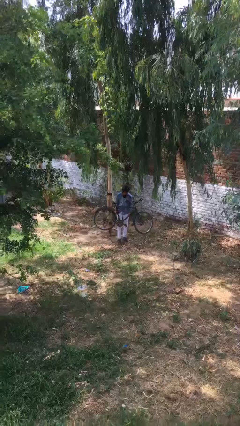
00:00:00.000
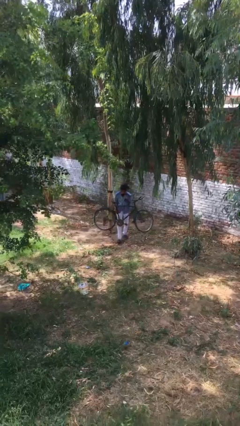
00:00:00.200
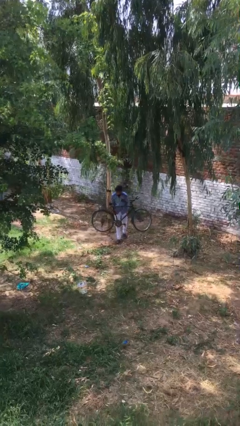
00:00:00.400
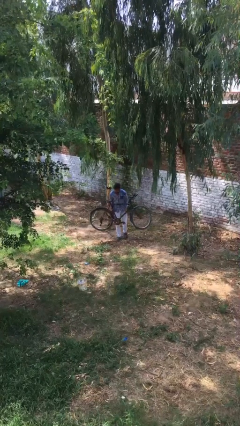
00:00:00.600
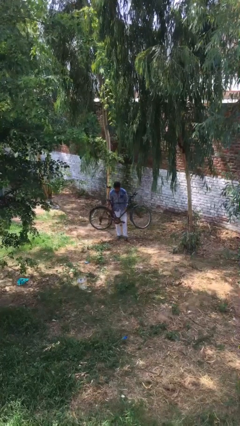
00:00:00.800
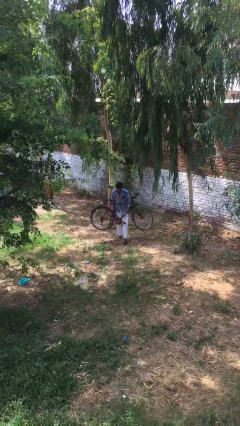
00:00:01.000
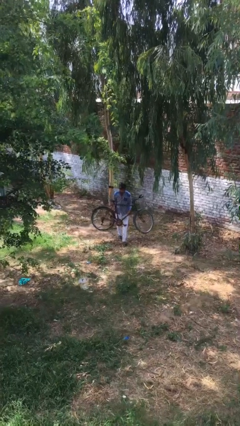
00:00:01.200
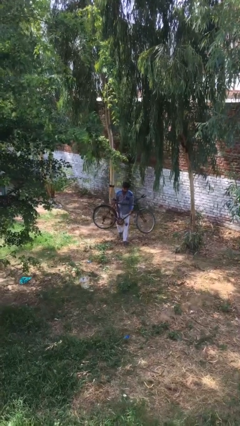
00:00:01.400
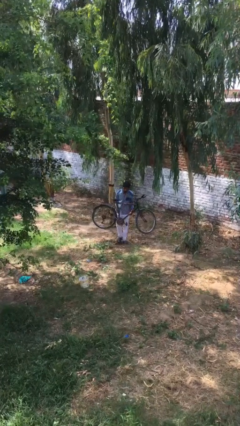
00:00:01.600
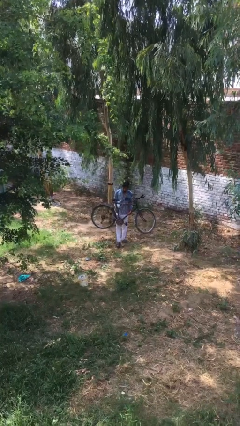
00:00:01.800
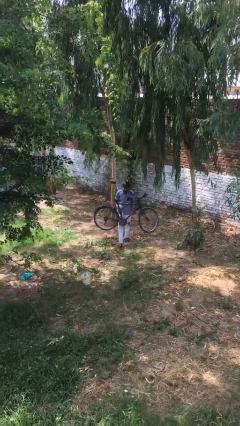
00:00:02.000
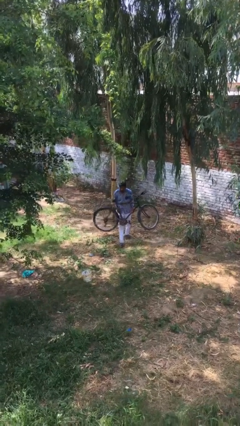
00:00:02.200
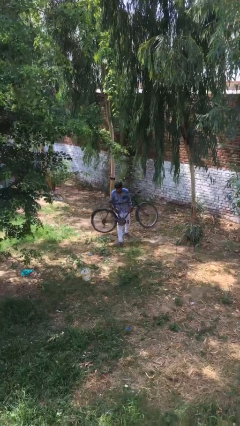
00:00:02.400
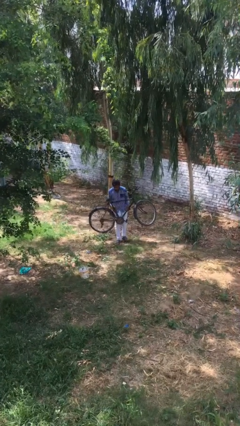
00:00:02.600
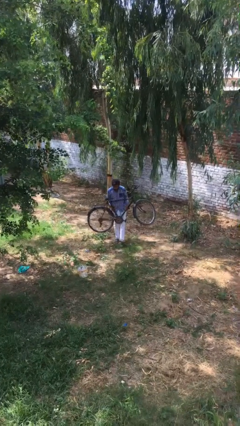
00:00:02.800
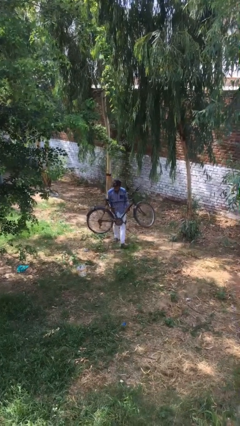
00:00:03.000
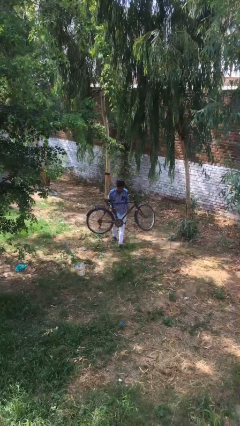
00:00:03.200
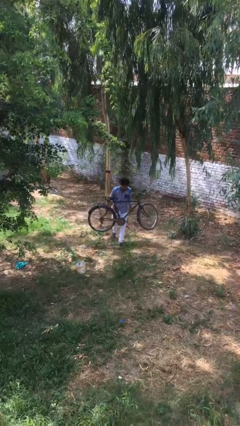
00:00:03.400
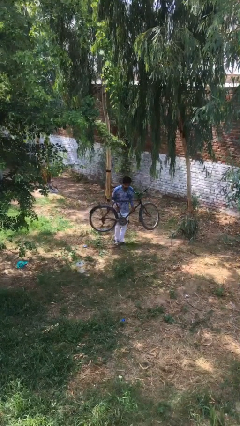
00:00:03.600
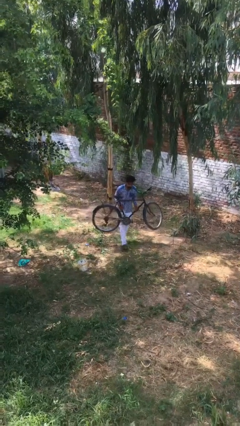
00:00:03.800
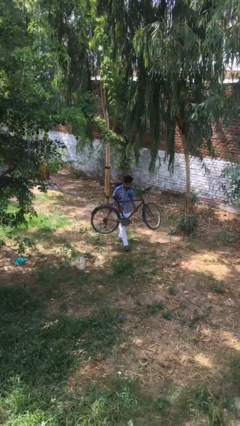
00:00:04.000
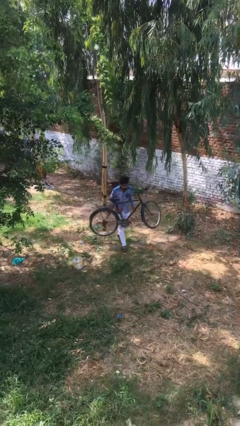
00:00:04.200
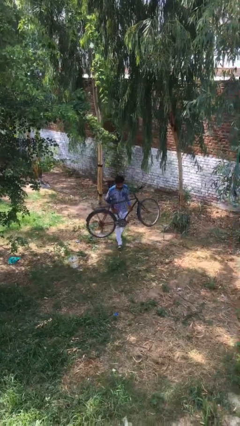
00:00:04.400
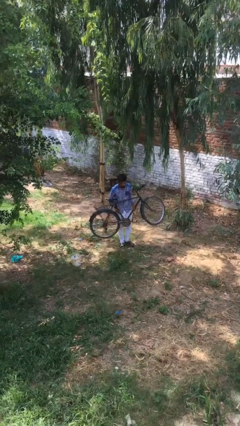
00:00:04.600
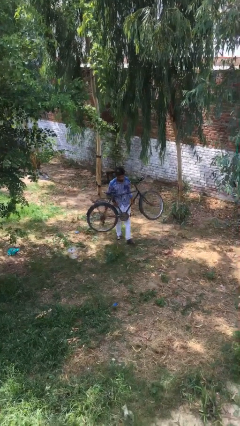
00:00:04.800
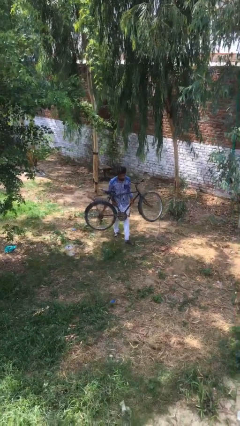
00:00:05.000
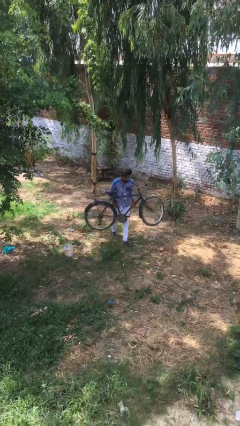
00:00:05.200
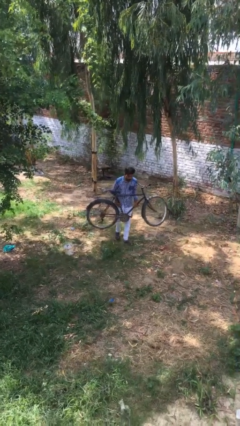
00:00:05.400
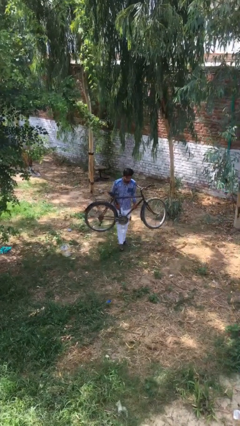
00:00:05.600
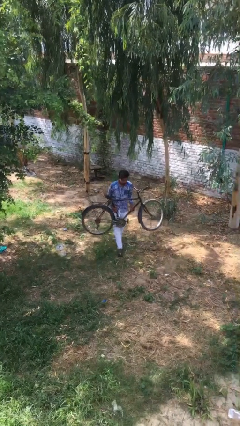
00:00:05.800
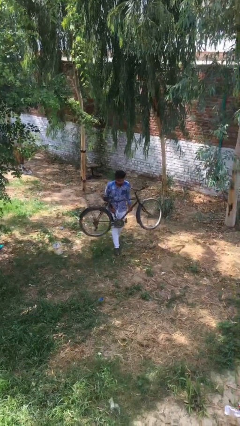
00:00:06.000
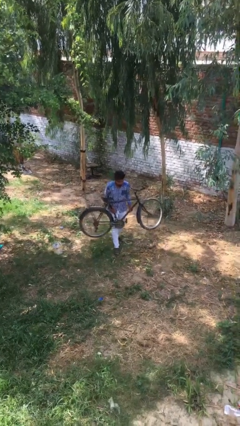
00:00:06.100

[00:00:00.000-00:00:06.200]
person carries heavy object

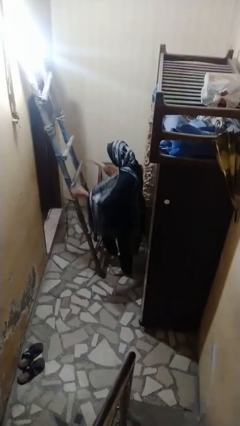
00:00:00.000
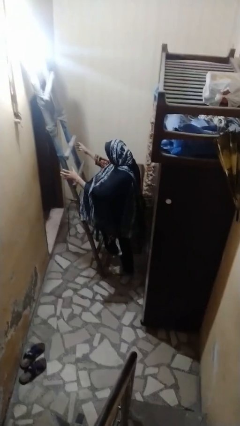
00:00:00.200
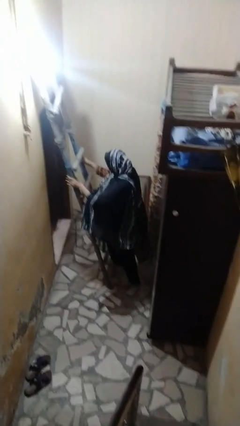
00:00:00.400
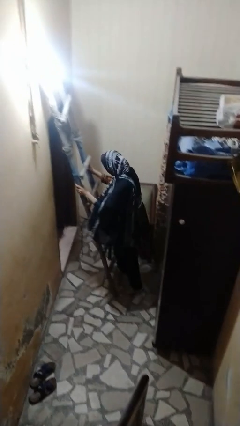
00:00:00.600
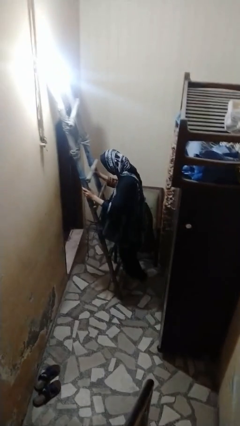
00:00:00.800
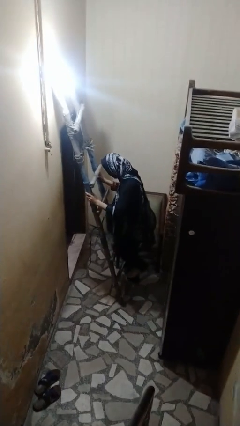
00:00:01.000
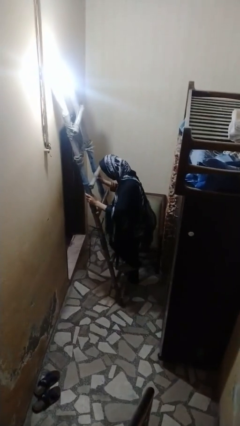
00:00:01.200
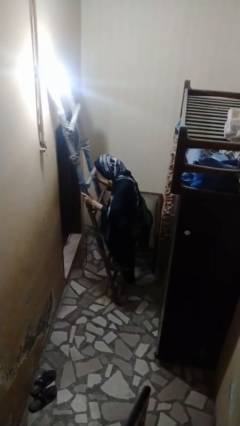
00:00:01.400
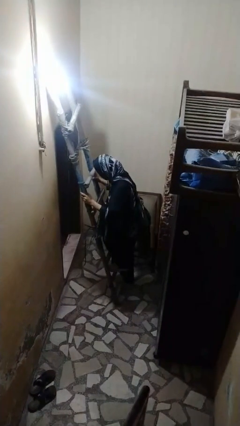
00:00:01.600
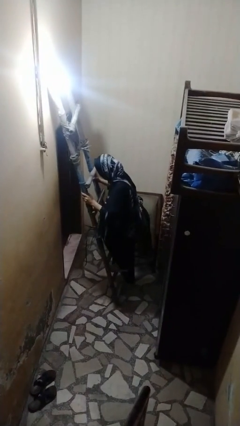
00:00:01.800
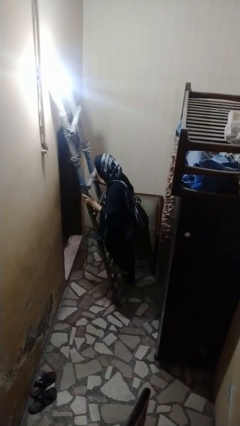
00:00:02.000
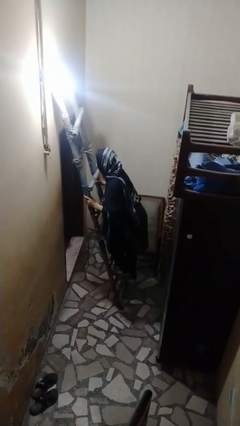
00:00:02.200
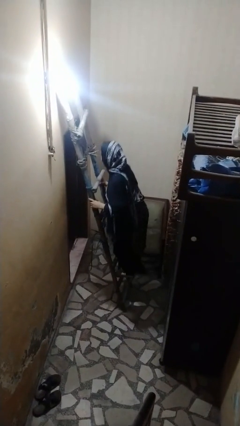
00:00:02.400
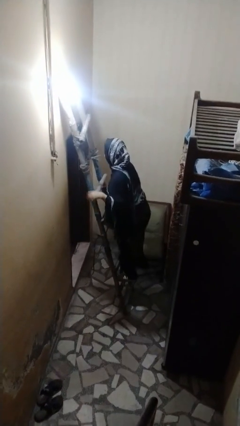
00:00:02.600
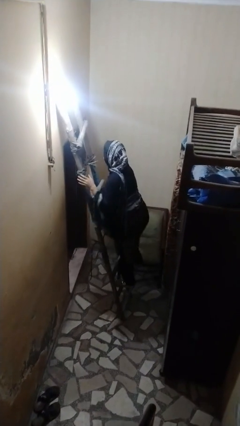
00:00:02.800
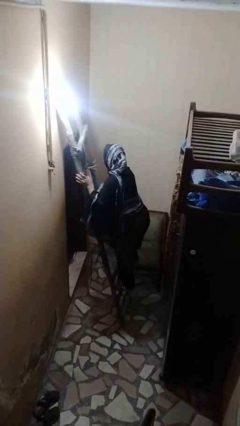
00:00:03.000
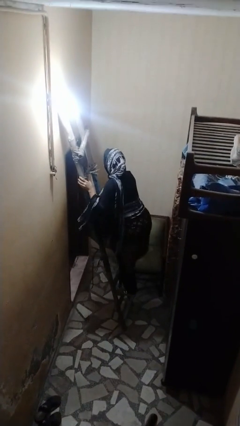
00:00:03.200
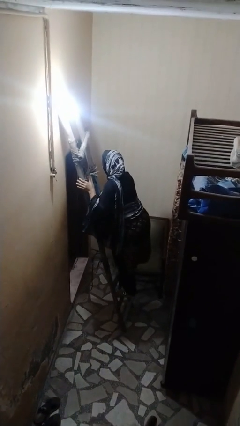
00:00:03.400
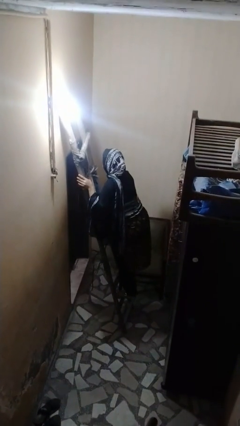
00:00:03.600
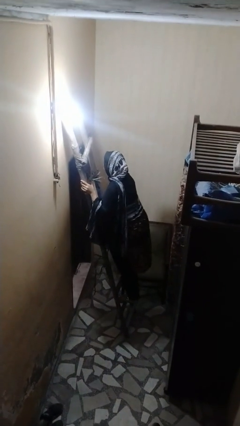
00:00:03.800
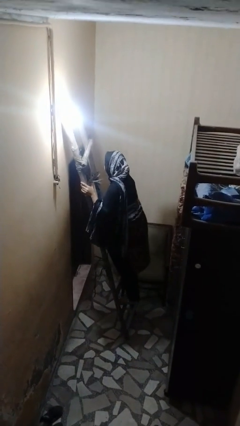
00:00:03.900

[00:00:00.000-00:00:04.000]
person climbs up ladder

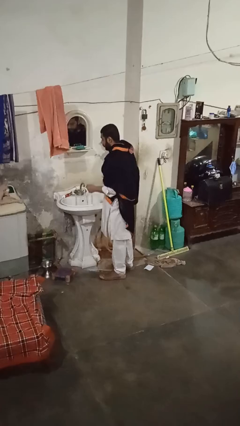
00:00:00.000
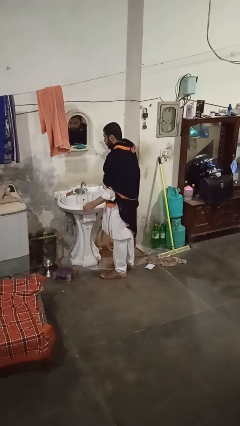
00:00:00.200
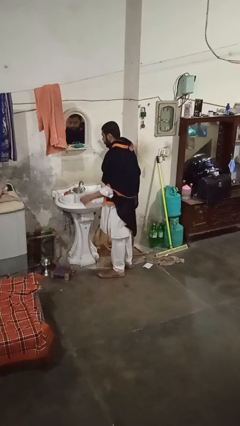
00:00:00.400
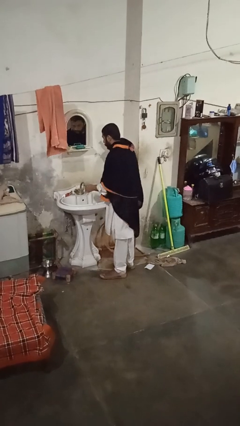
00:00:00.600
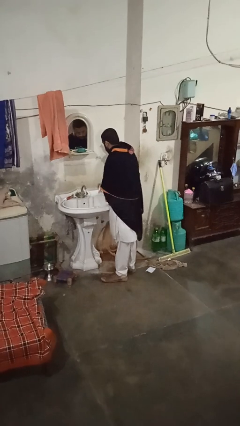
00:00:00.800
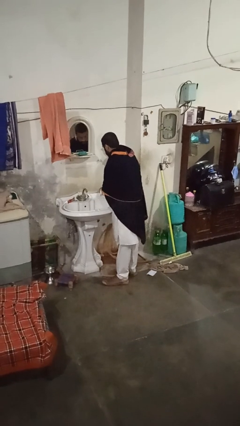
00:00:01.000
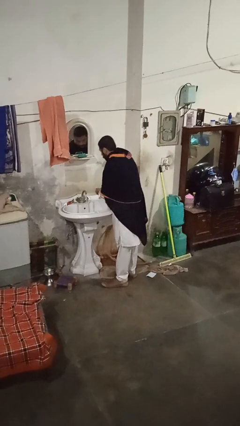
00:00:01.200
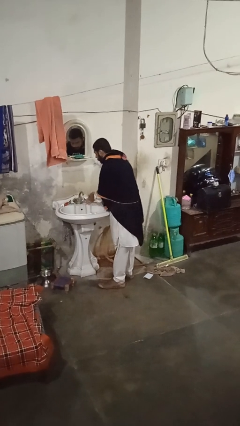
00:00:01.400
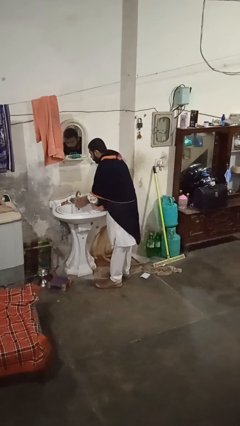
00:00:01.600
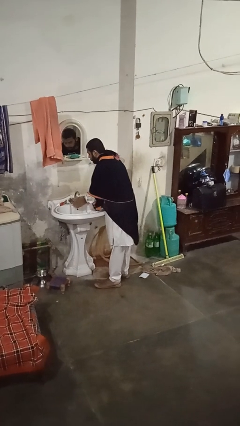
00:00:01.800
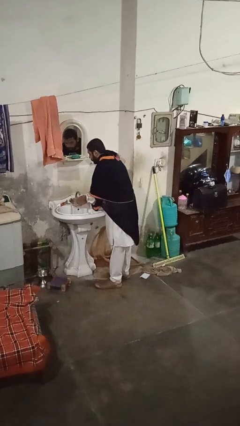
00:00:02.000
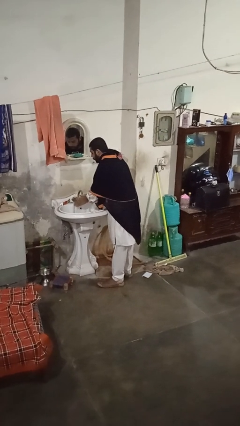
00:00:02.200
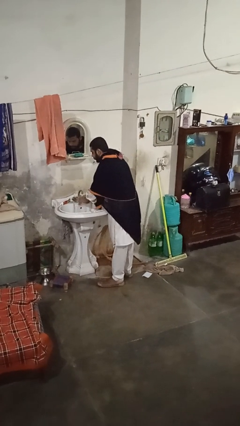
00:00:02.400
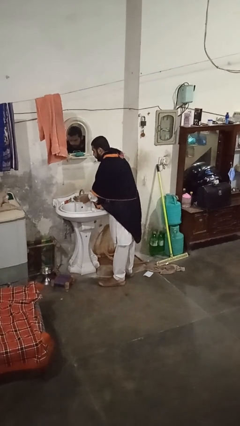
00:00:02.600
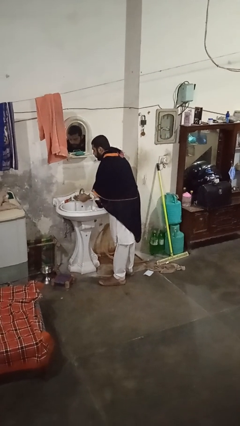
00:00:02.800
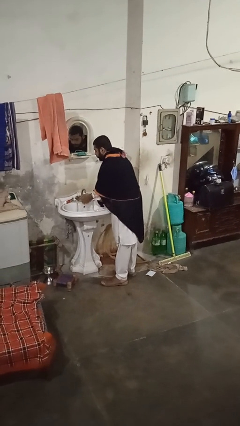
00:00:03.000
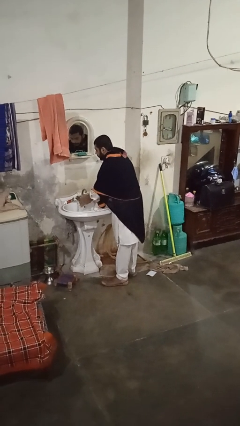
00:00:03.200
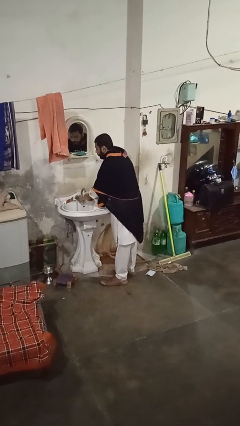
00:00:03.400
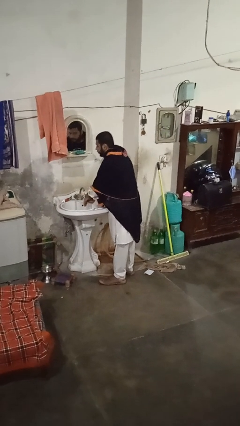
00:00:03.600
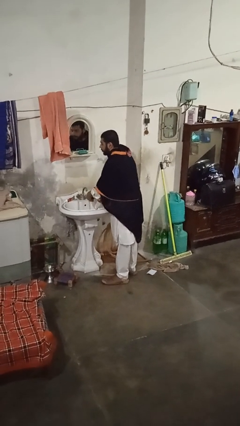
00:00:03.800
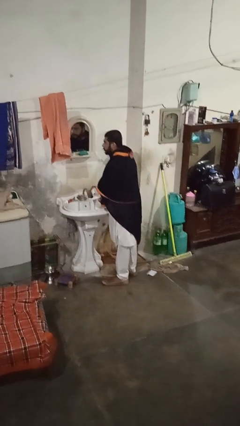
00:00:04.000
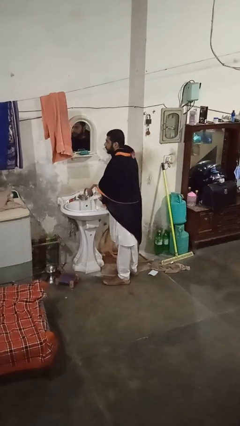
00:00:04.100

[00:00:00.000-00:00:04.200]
person washes hands

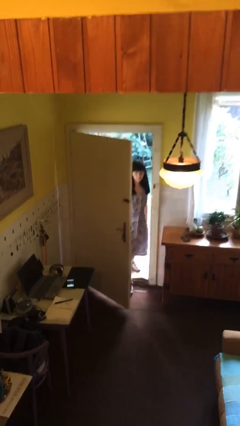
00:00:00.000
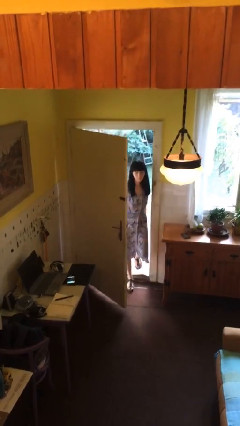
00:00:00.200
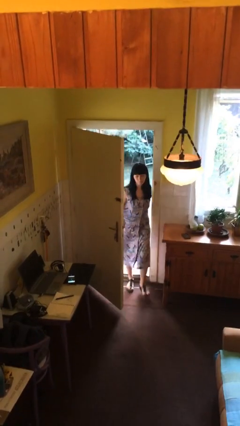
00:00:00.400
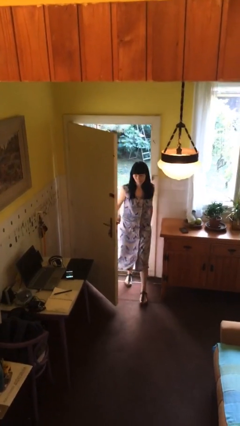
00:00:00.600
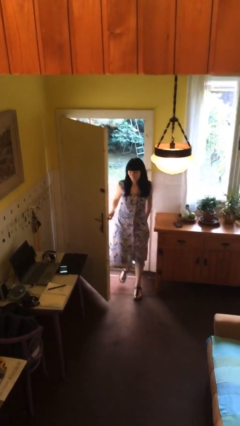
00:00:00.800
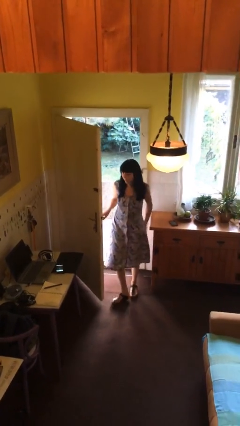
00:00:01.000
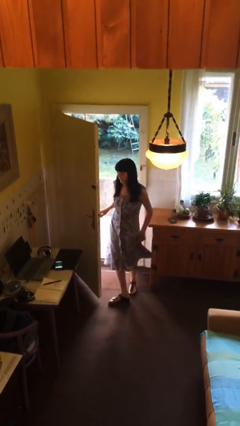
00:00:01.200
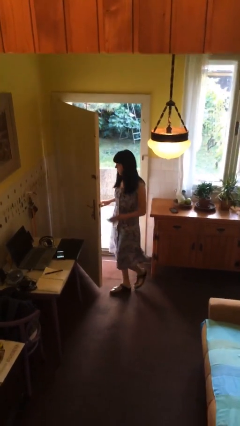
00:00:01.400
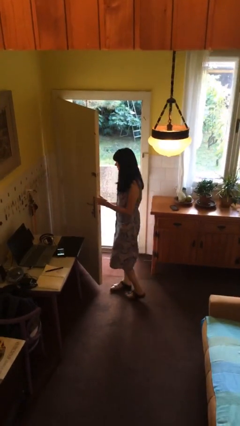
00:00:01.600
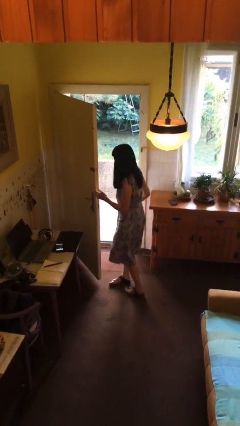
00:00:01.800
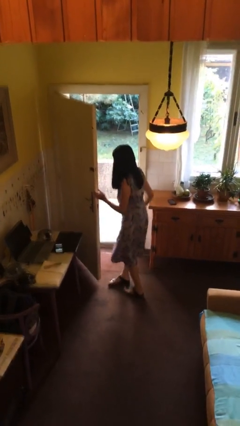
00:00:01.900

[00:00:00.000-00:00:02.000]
person enters scene through structure

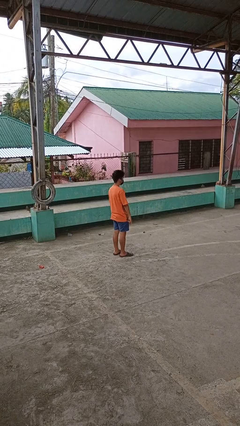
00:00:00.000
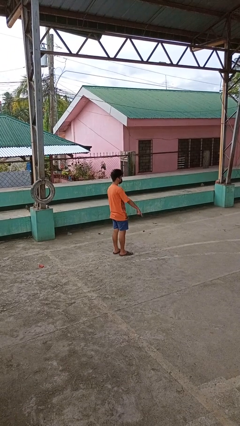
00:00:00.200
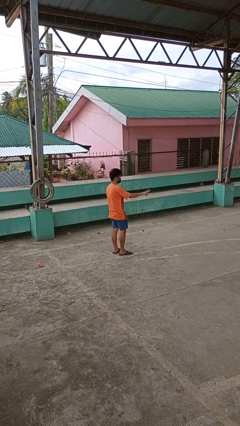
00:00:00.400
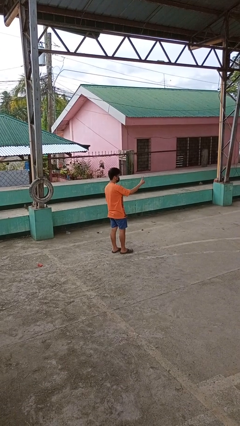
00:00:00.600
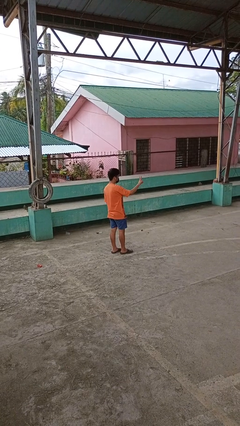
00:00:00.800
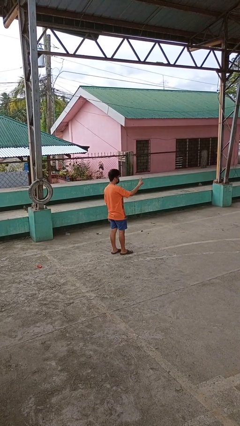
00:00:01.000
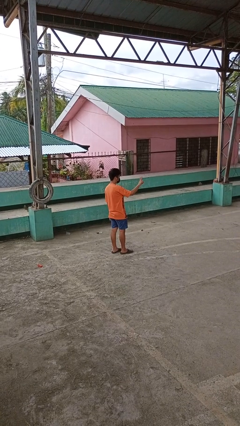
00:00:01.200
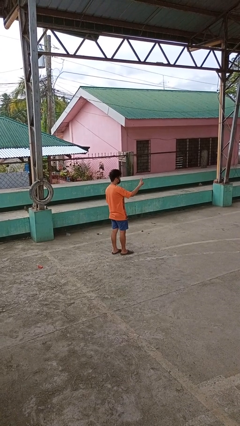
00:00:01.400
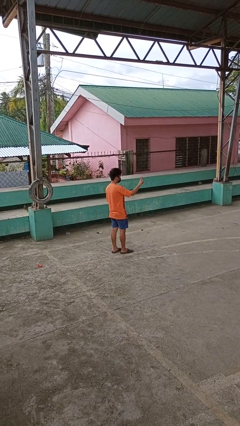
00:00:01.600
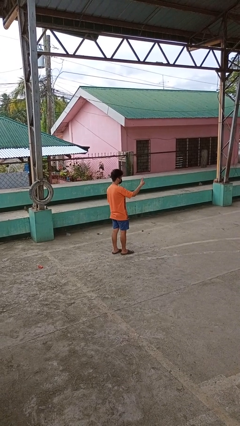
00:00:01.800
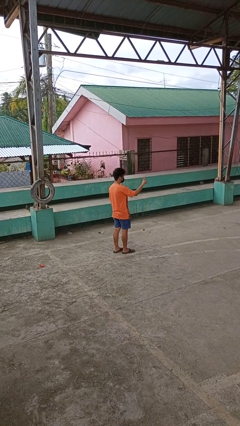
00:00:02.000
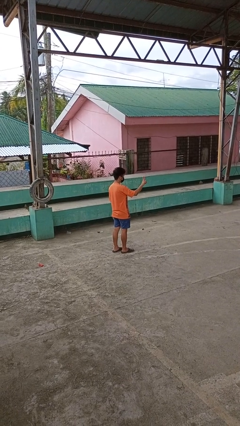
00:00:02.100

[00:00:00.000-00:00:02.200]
person gestures peace
